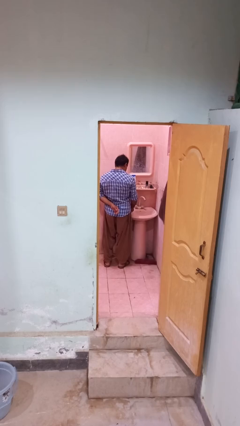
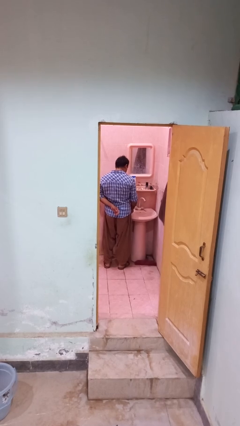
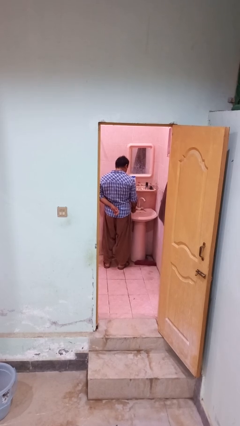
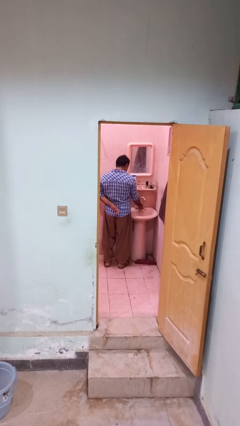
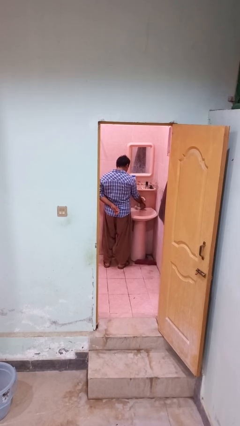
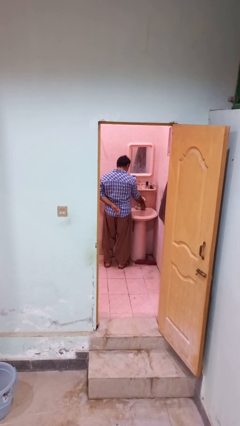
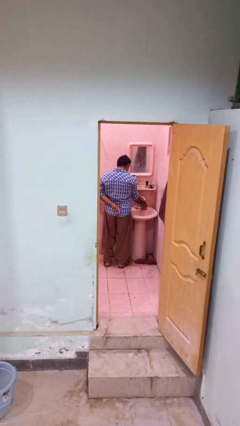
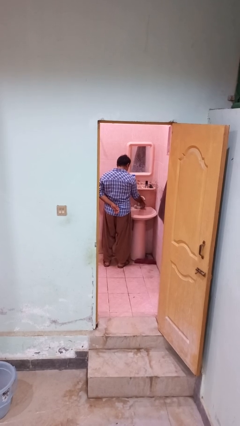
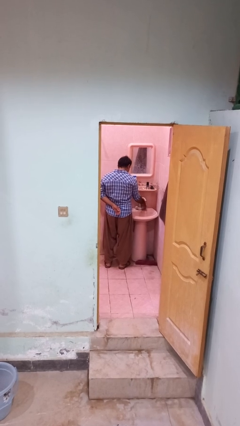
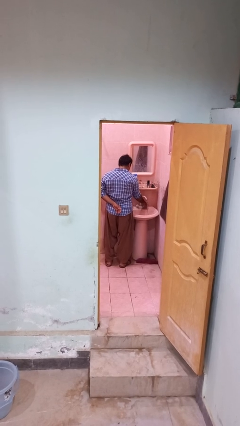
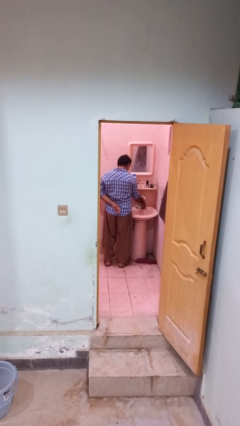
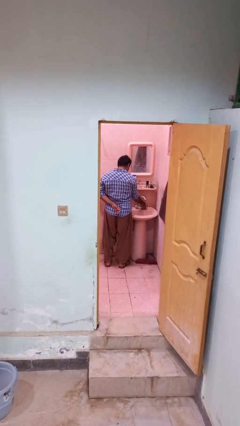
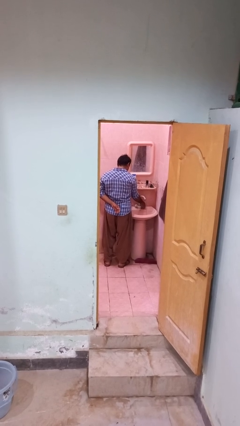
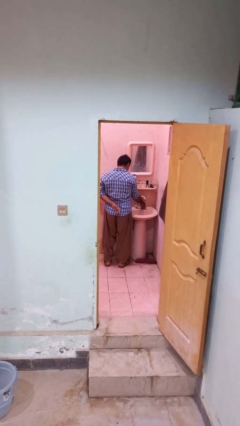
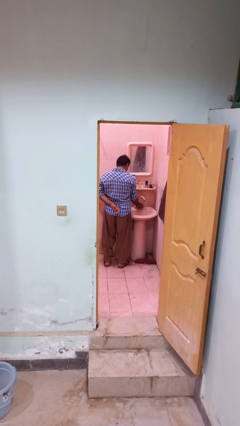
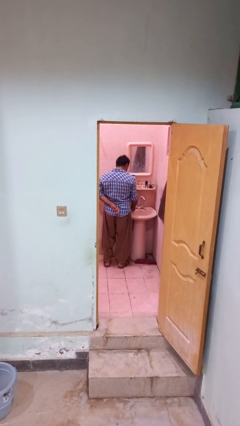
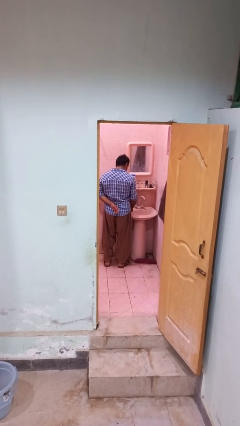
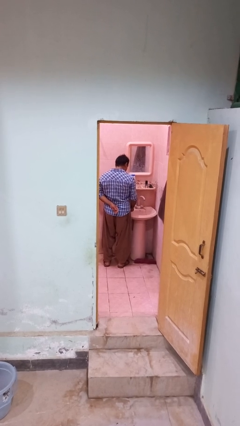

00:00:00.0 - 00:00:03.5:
person turns on faucet

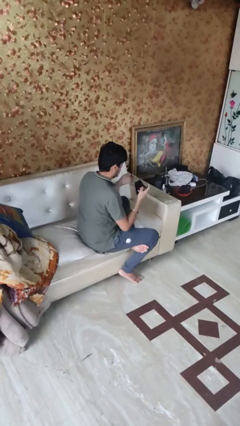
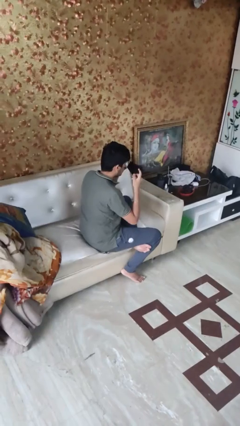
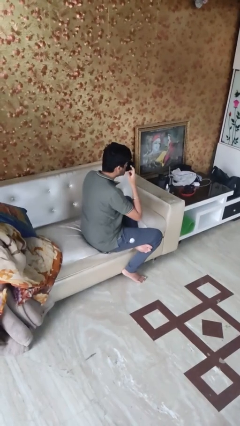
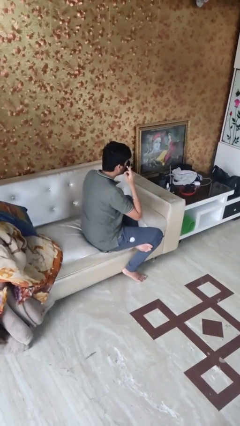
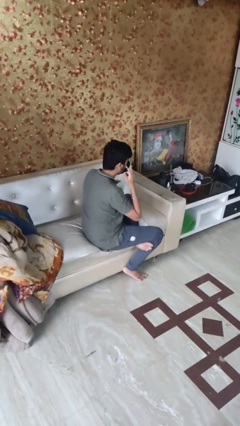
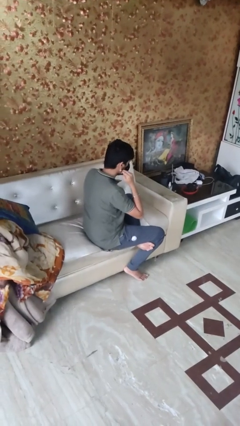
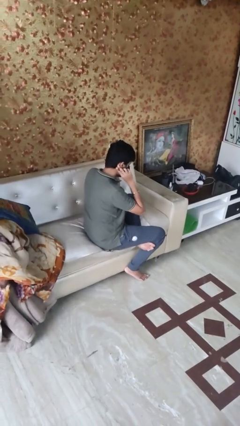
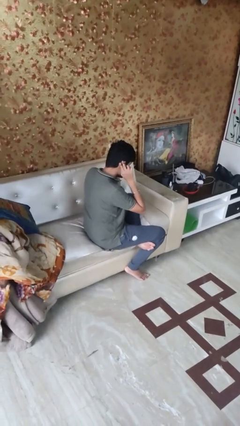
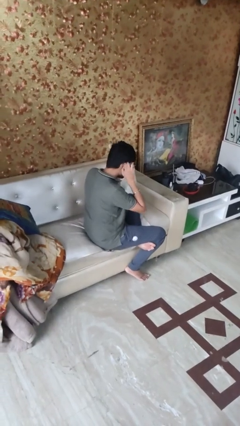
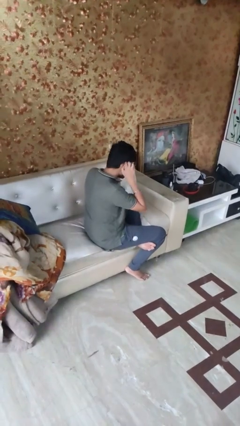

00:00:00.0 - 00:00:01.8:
person puts on facemask

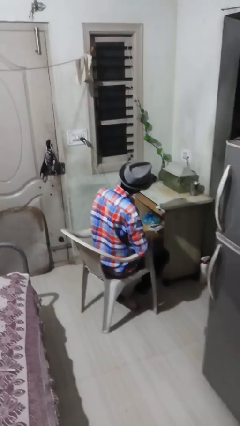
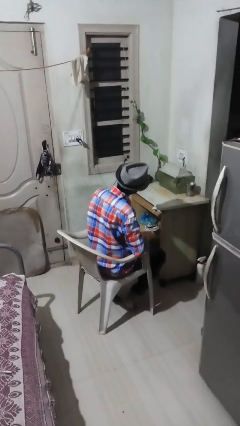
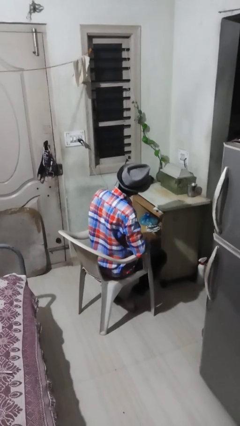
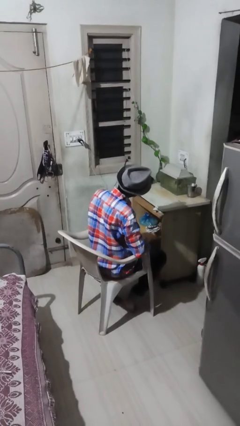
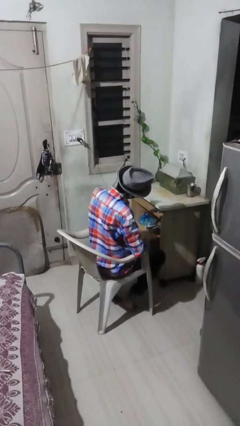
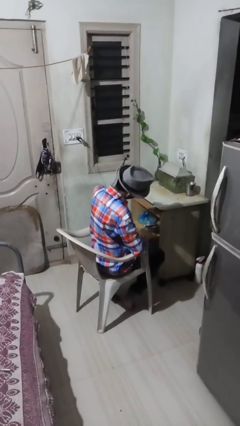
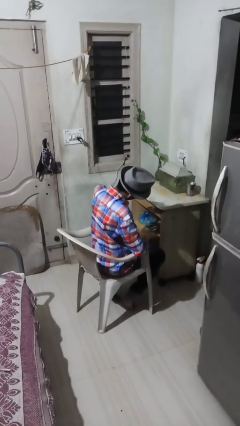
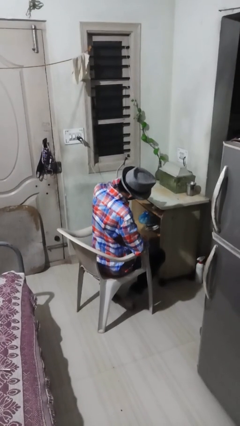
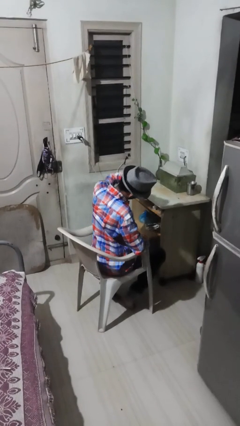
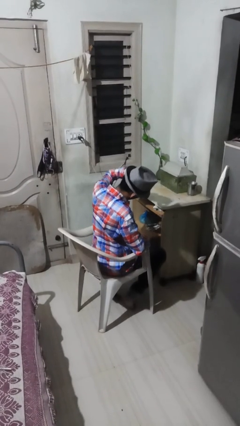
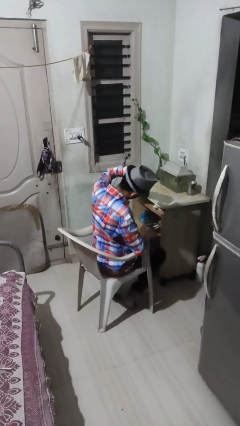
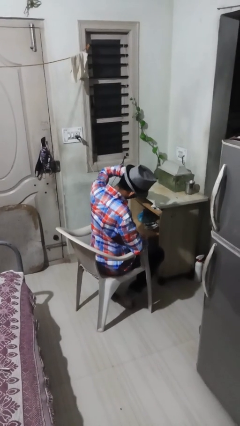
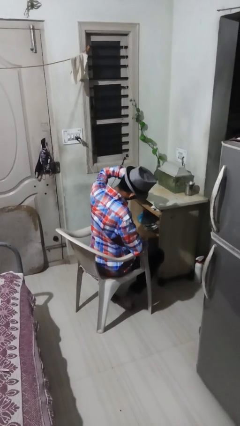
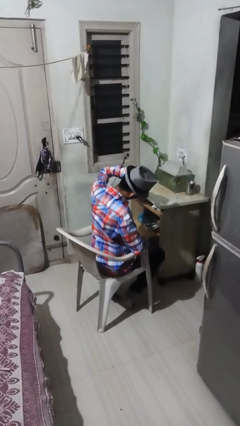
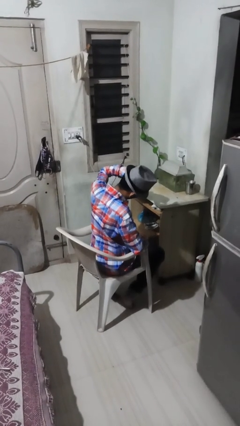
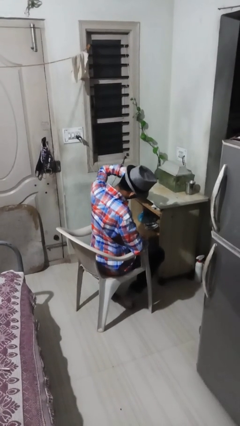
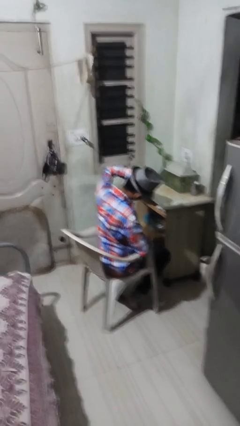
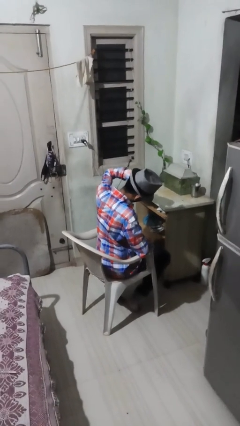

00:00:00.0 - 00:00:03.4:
person puts fingers in ear

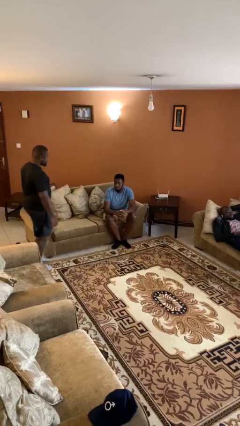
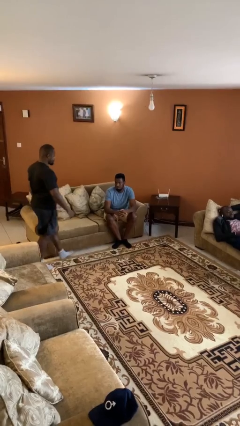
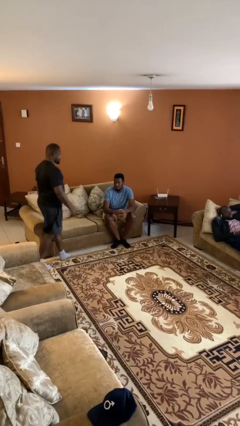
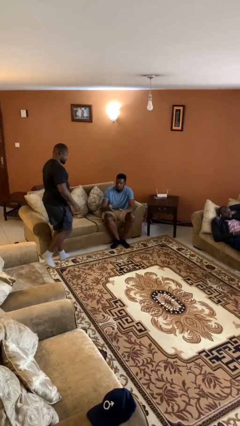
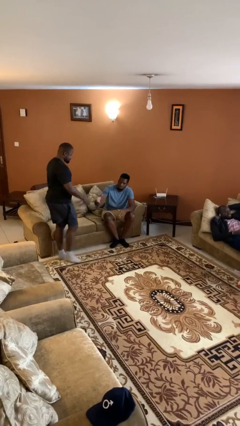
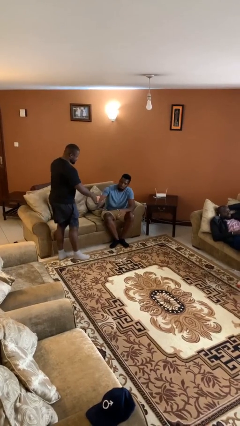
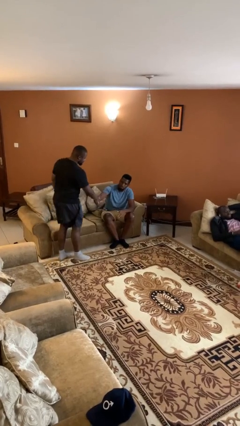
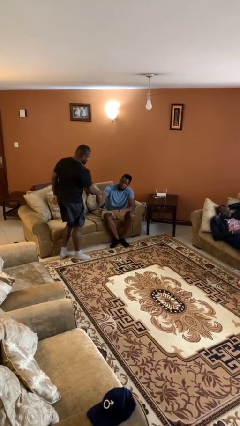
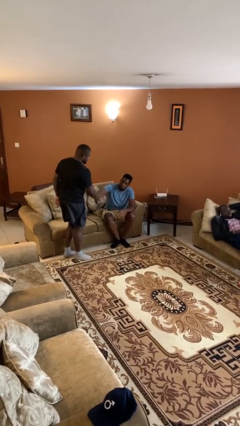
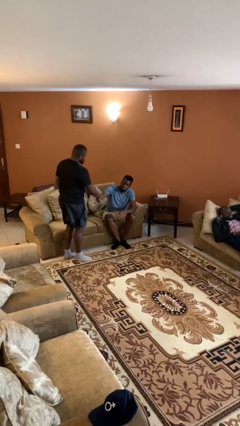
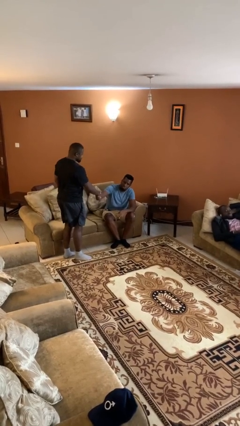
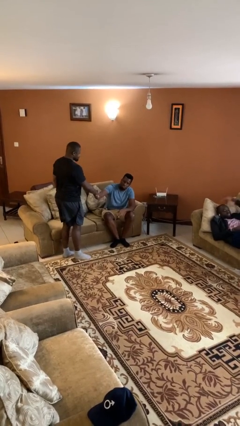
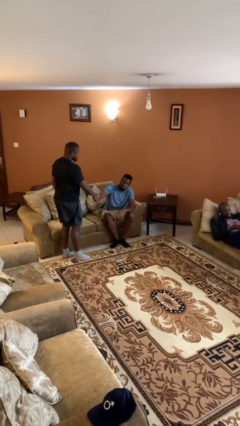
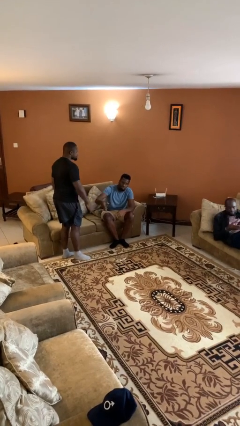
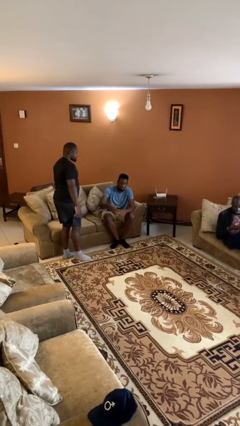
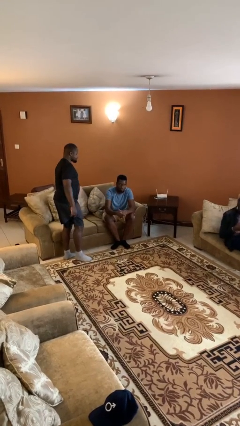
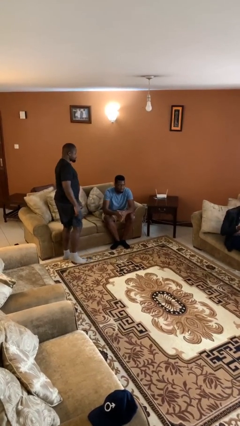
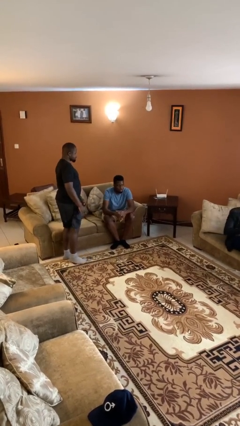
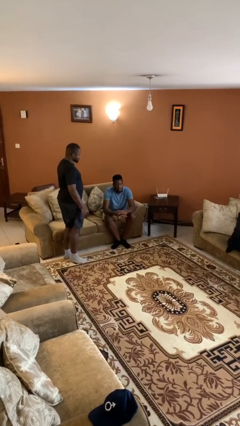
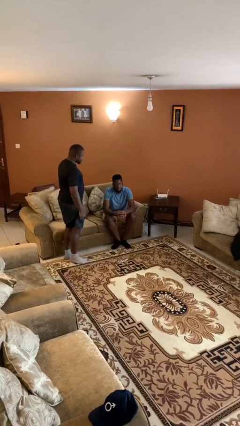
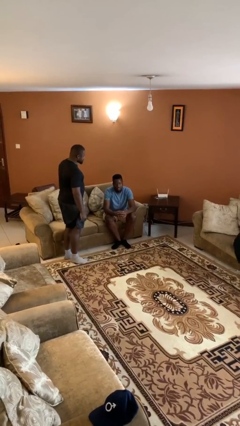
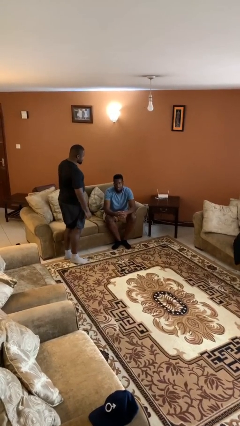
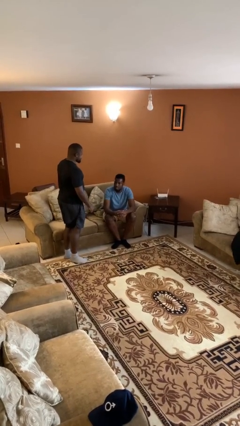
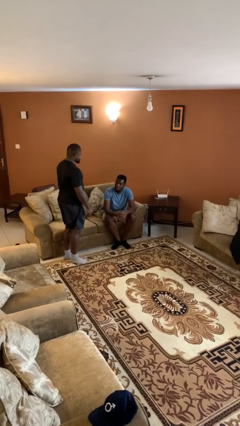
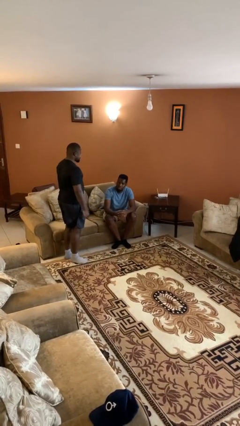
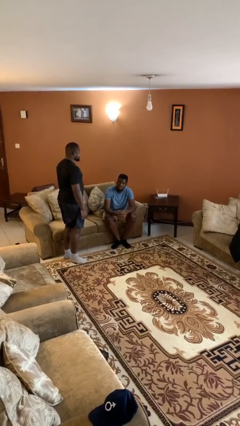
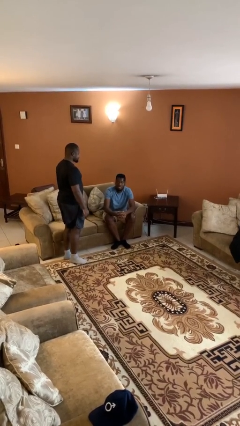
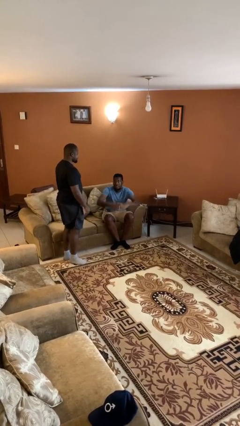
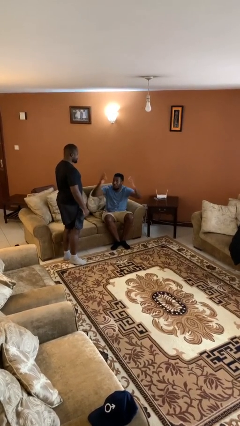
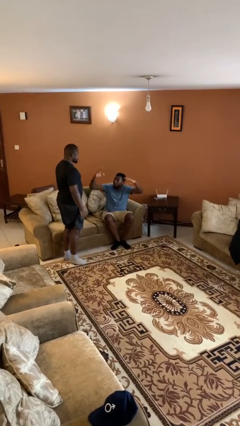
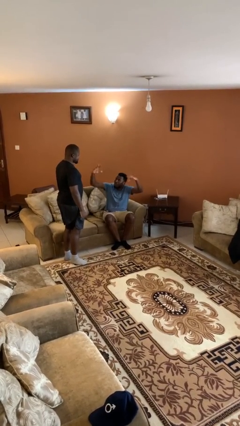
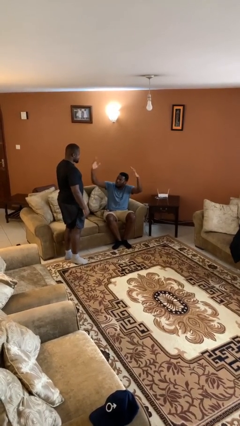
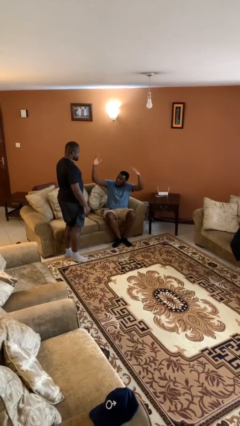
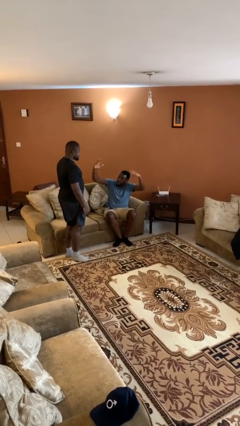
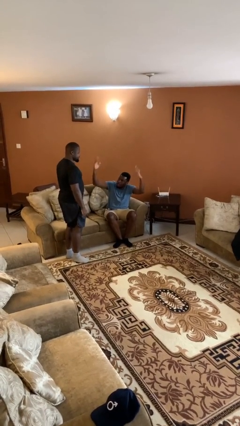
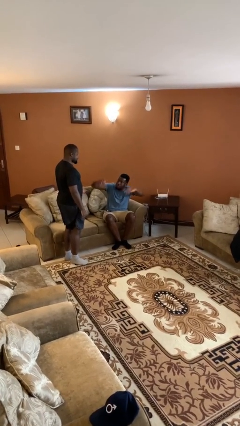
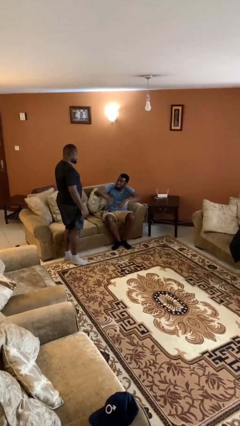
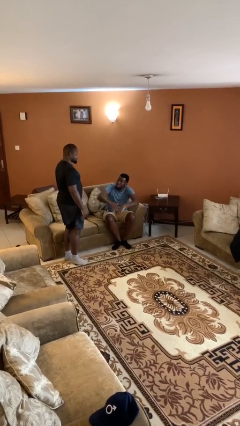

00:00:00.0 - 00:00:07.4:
person shakes hand

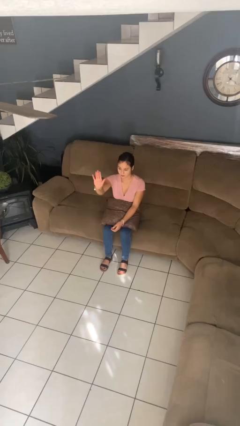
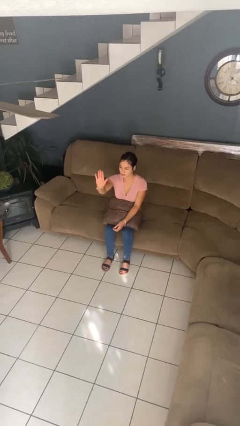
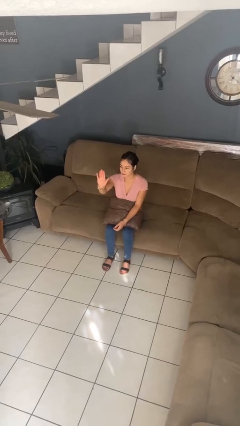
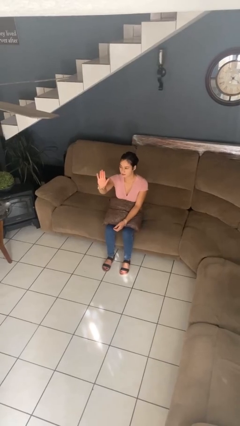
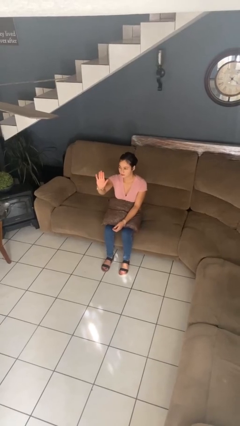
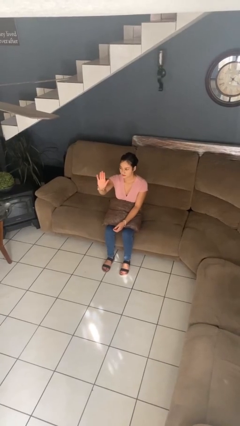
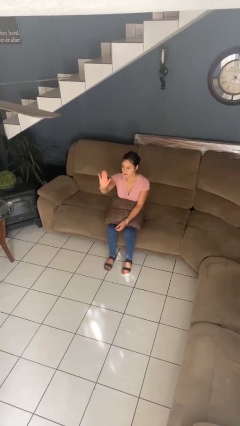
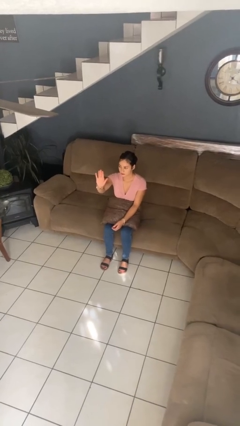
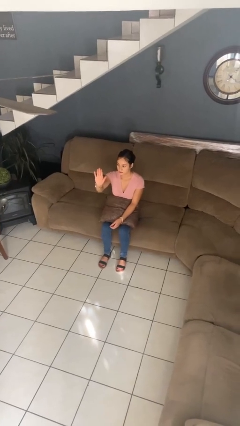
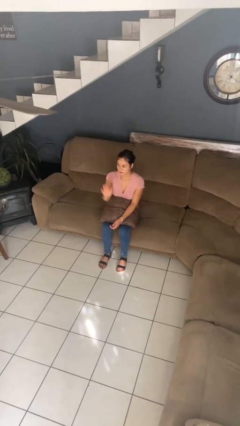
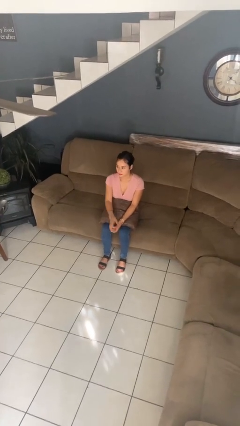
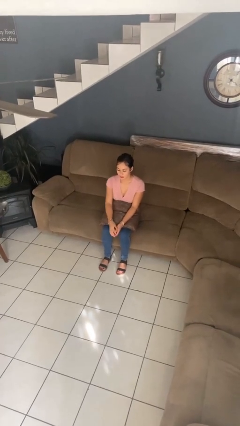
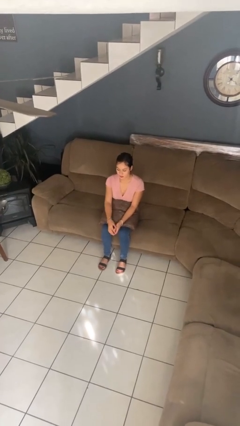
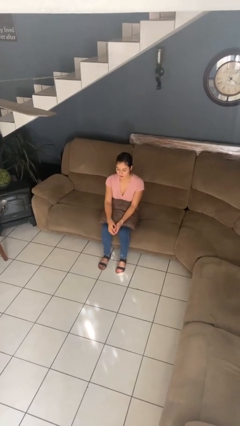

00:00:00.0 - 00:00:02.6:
person gestures stop
